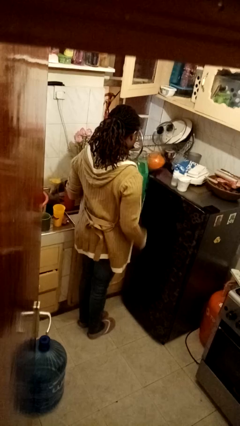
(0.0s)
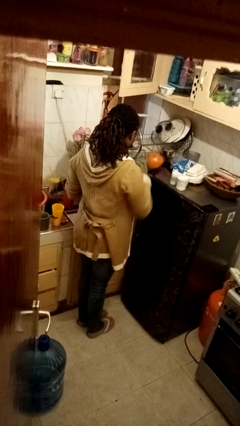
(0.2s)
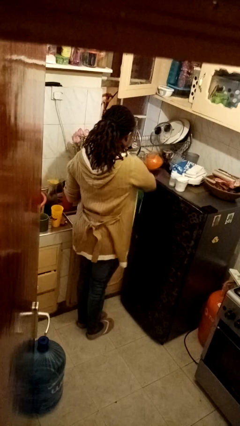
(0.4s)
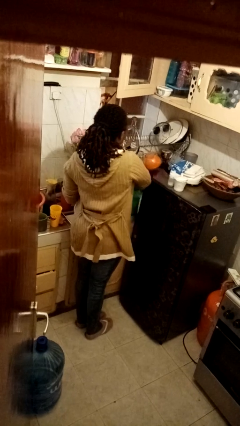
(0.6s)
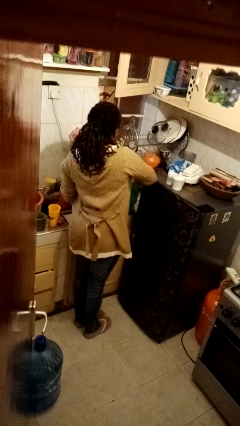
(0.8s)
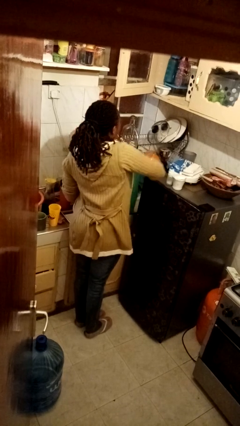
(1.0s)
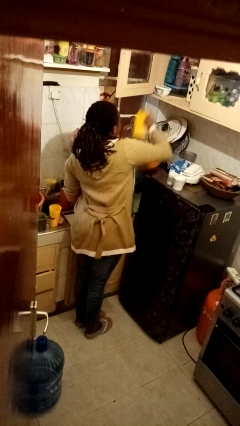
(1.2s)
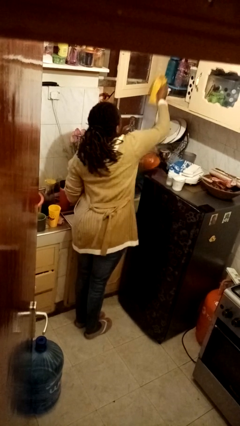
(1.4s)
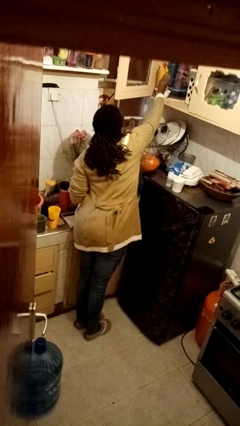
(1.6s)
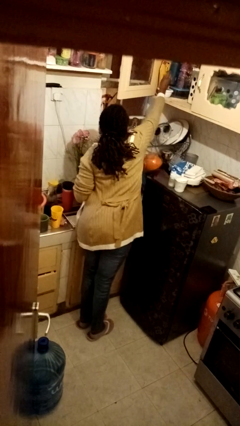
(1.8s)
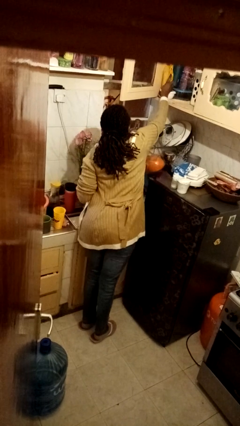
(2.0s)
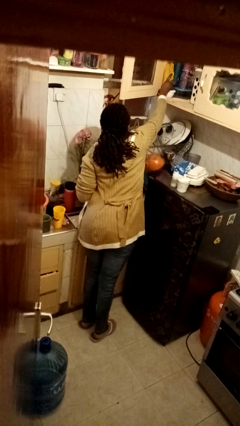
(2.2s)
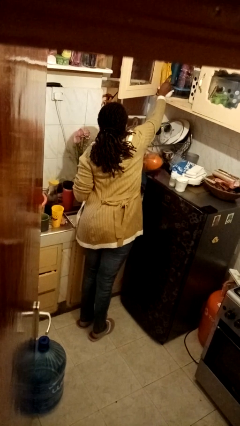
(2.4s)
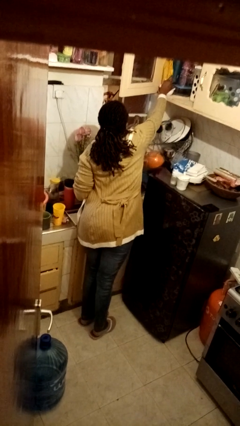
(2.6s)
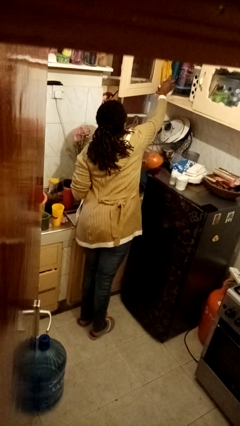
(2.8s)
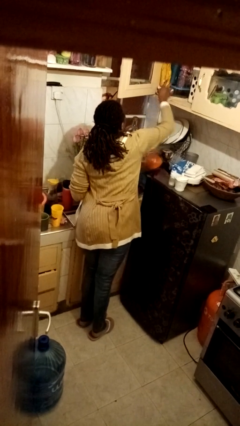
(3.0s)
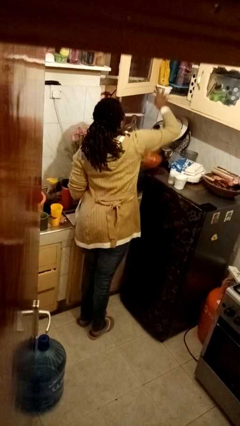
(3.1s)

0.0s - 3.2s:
person loads groceries into cabinet

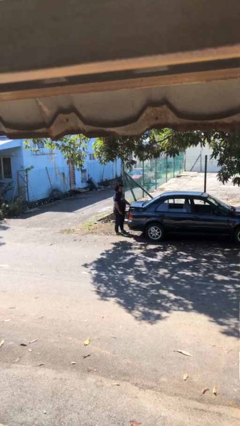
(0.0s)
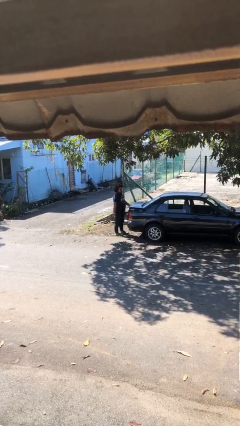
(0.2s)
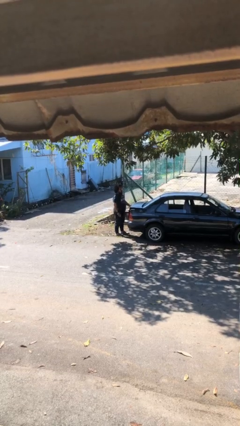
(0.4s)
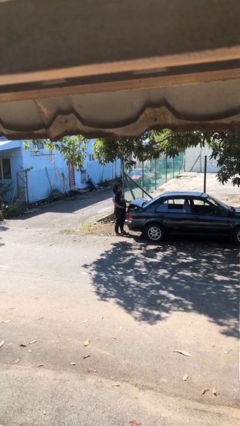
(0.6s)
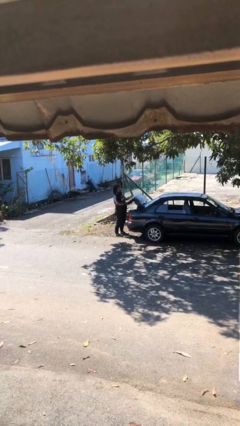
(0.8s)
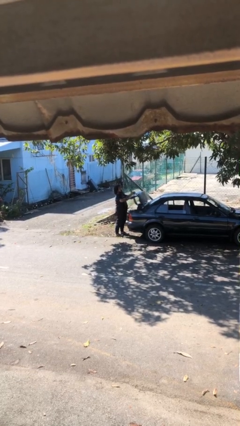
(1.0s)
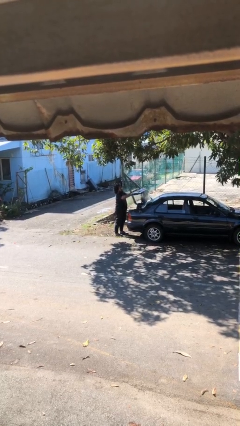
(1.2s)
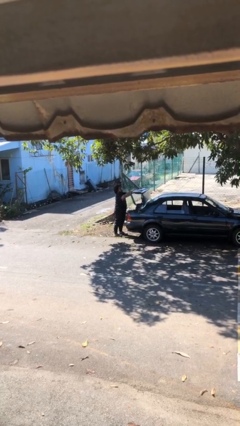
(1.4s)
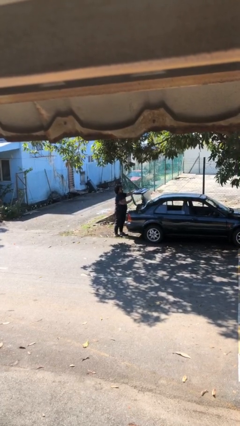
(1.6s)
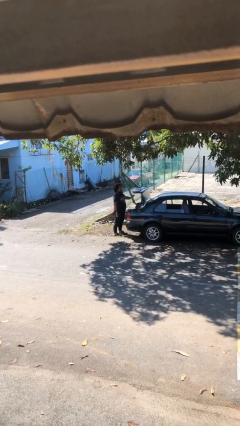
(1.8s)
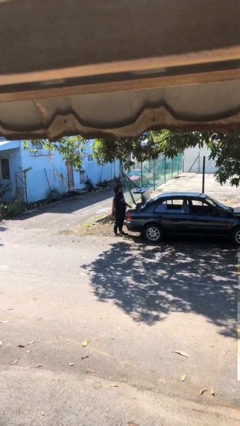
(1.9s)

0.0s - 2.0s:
person opens car trunk

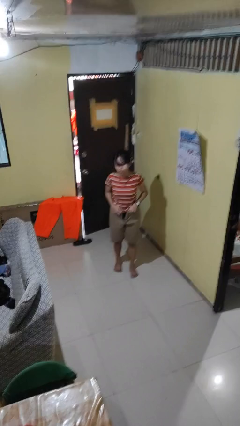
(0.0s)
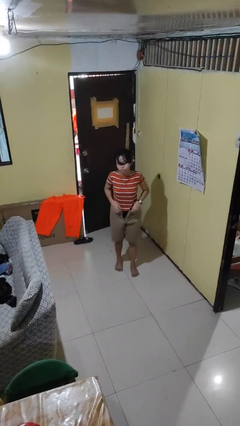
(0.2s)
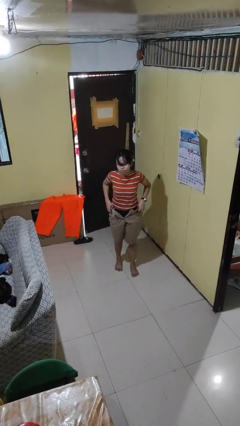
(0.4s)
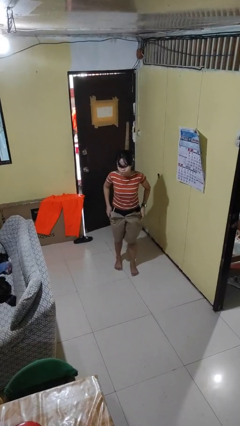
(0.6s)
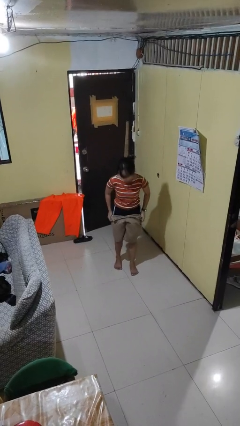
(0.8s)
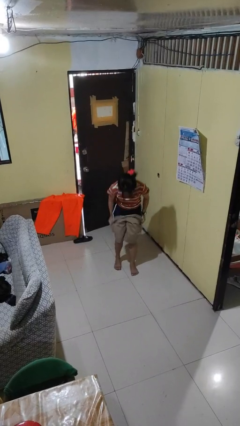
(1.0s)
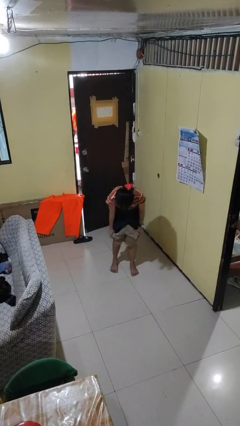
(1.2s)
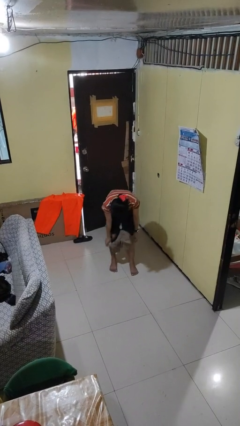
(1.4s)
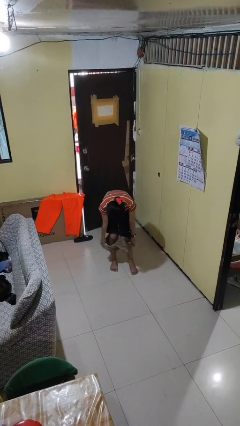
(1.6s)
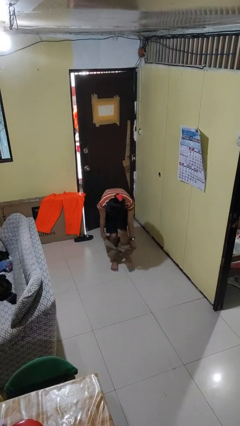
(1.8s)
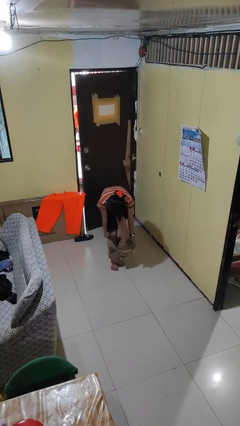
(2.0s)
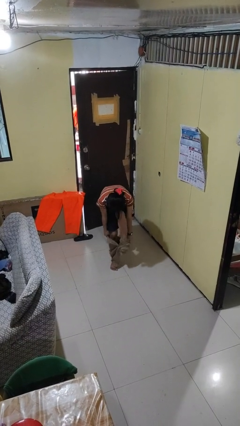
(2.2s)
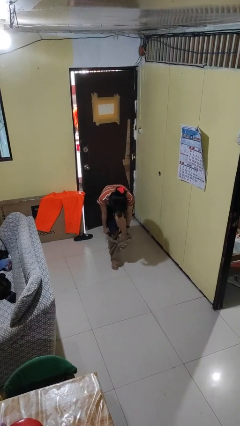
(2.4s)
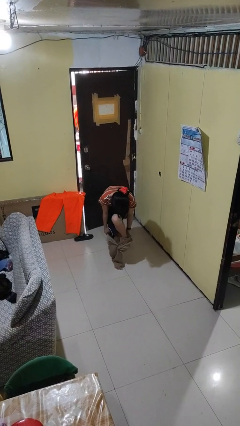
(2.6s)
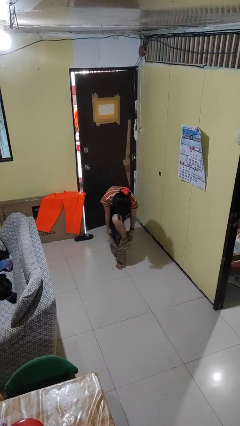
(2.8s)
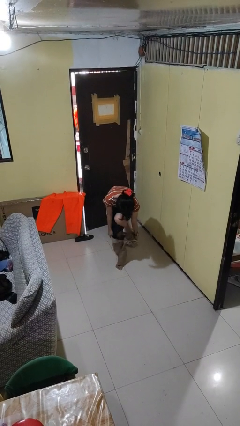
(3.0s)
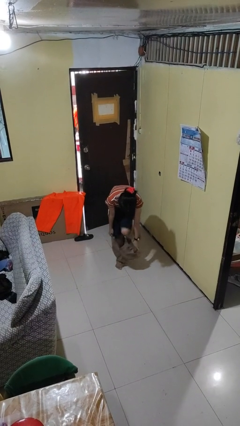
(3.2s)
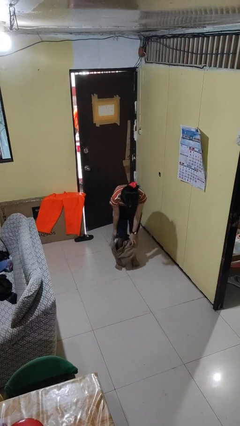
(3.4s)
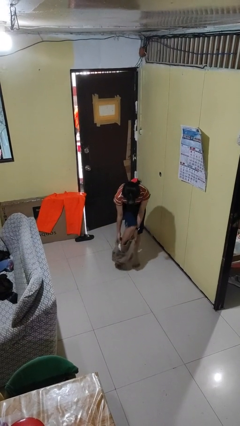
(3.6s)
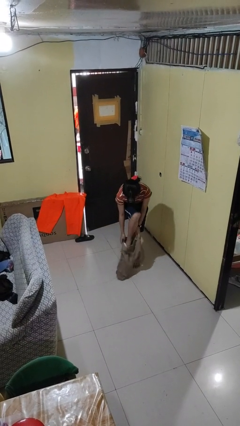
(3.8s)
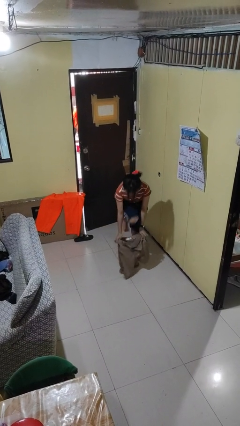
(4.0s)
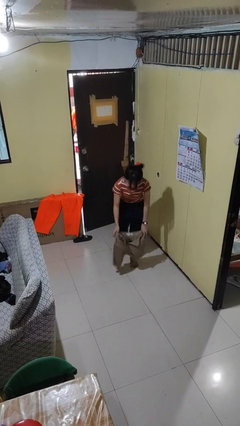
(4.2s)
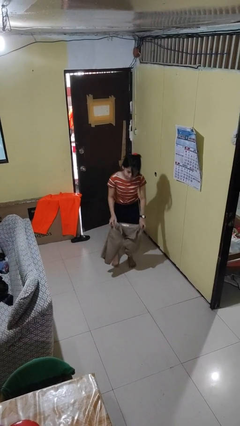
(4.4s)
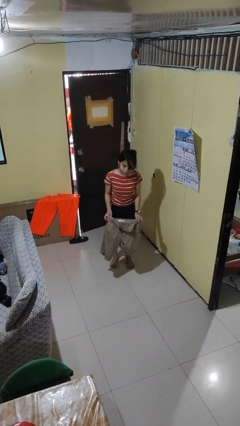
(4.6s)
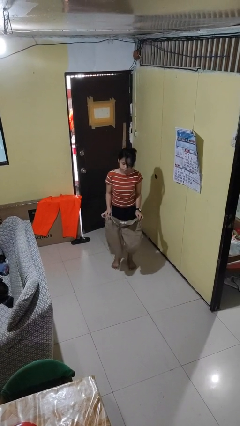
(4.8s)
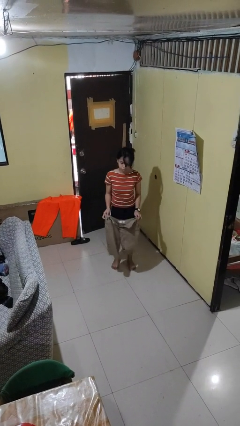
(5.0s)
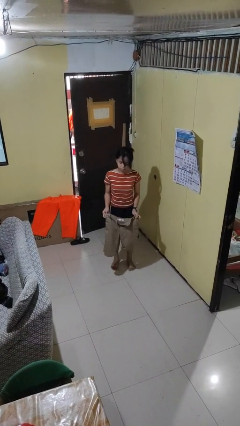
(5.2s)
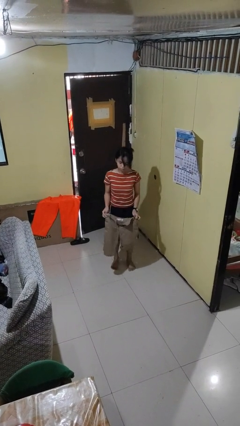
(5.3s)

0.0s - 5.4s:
person takes off pants

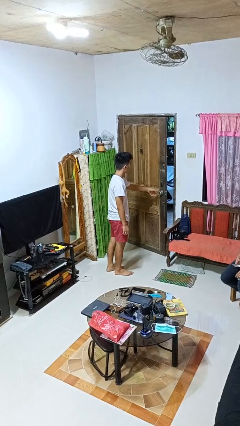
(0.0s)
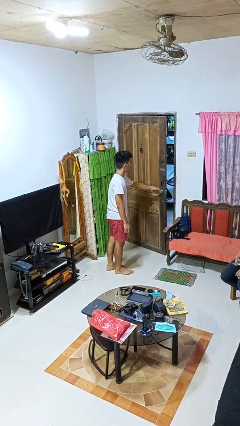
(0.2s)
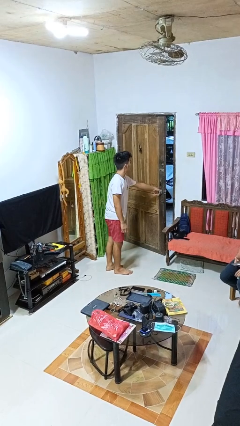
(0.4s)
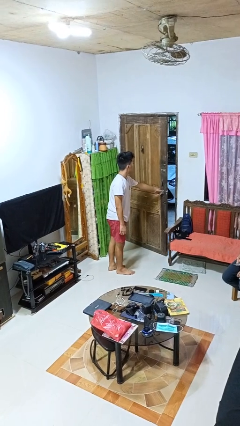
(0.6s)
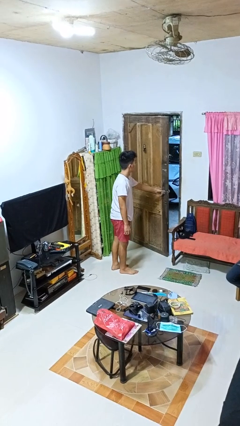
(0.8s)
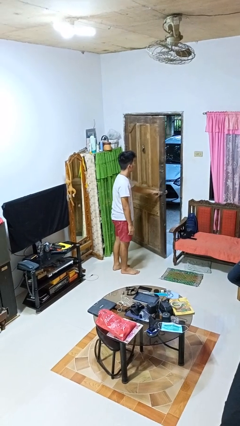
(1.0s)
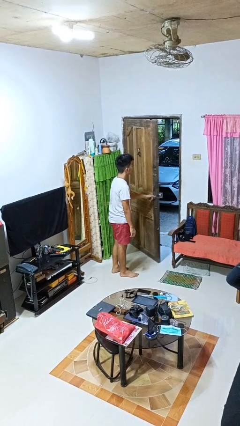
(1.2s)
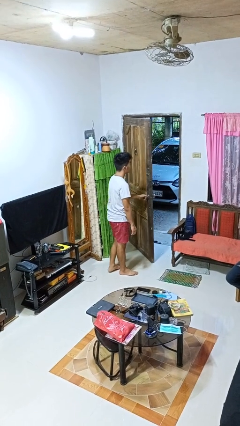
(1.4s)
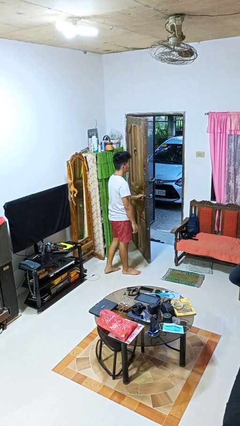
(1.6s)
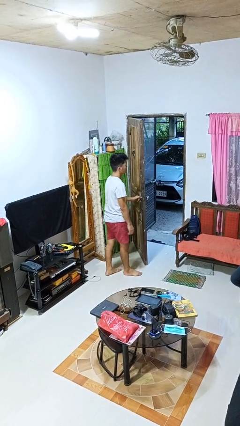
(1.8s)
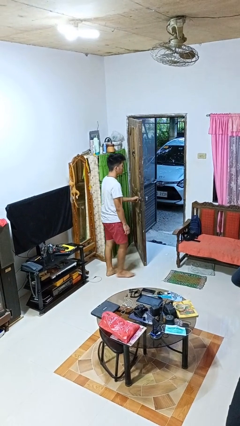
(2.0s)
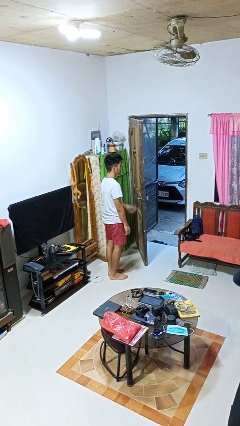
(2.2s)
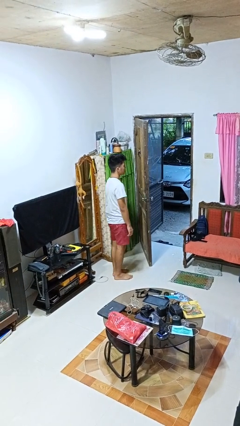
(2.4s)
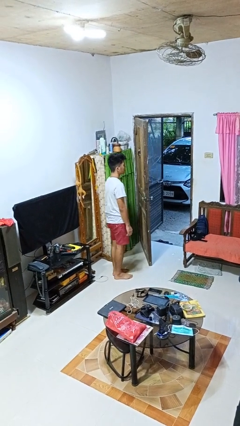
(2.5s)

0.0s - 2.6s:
person opens facility door

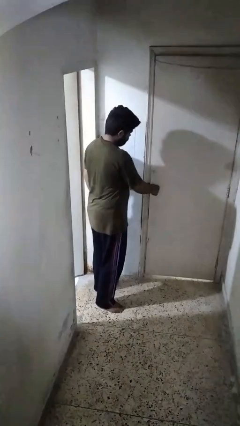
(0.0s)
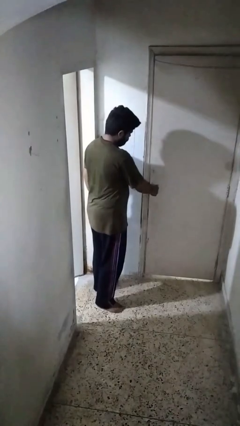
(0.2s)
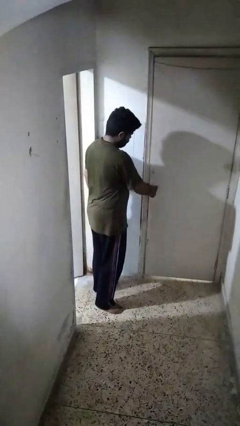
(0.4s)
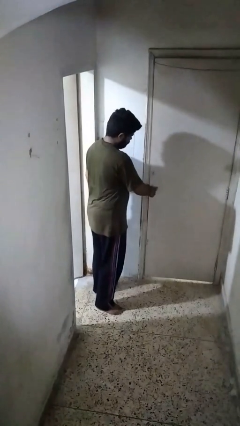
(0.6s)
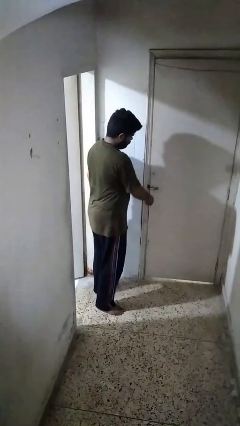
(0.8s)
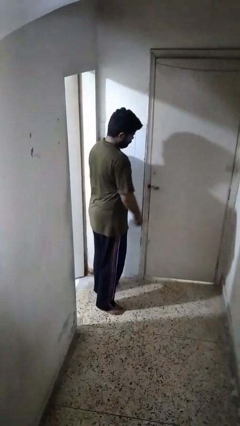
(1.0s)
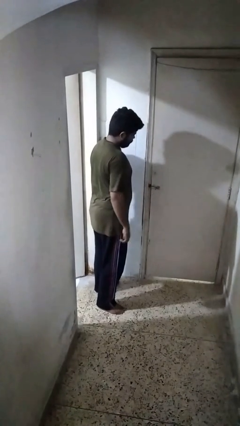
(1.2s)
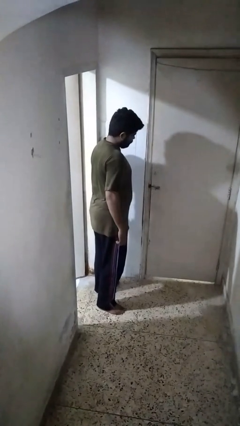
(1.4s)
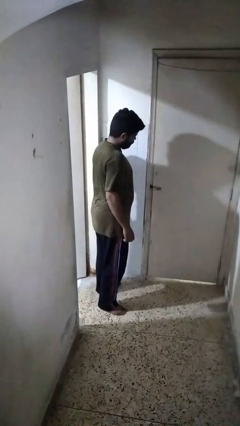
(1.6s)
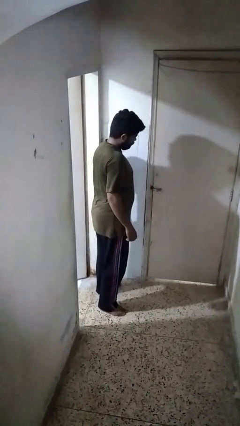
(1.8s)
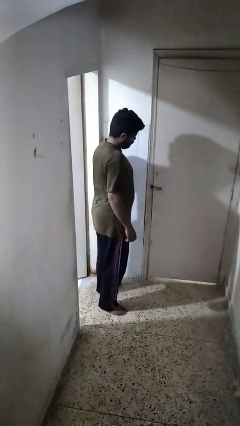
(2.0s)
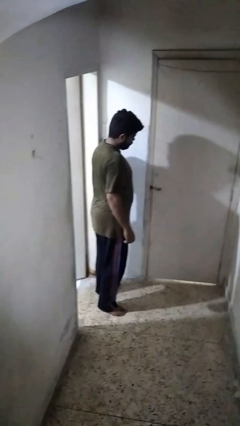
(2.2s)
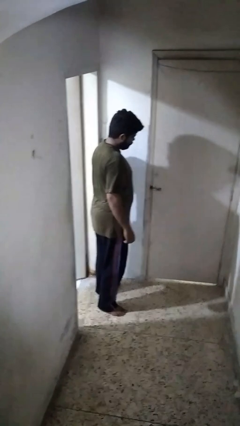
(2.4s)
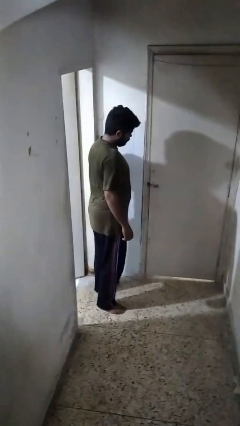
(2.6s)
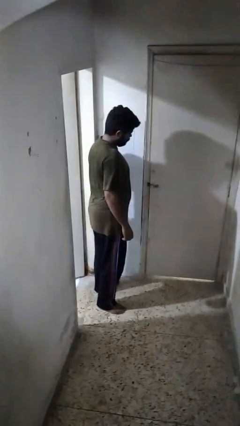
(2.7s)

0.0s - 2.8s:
person locks door with keys

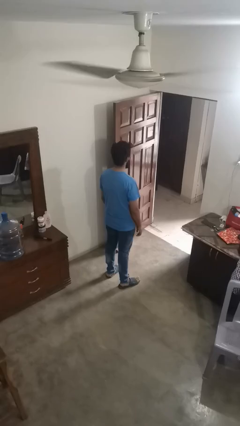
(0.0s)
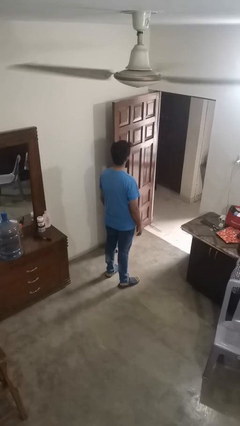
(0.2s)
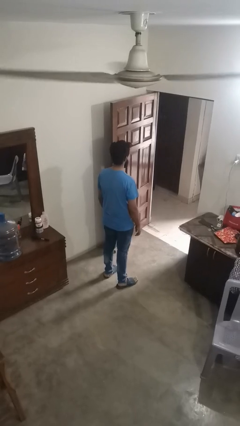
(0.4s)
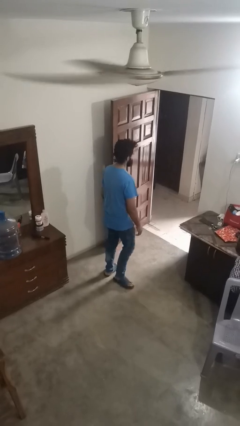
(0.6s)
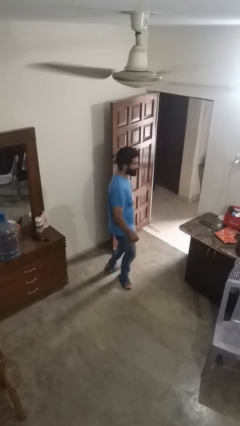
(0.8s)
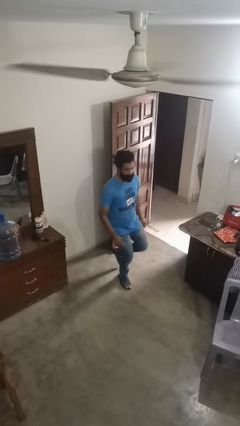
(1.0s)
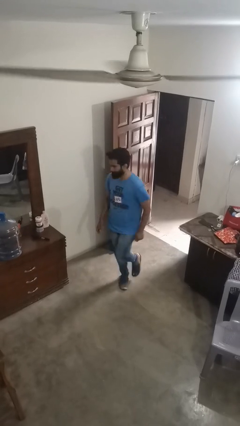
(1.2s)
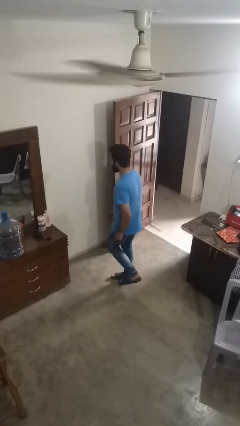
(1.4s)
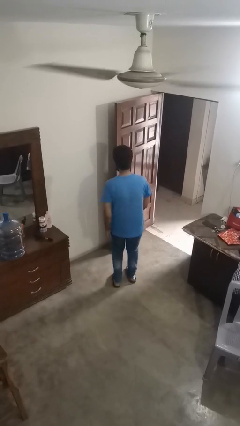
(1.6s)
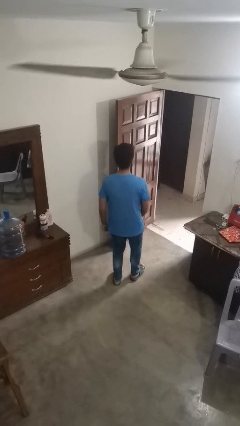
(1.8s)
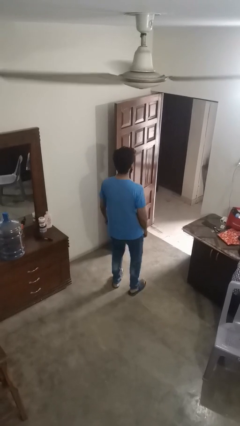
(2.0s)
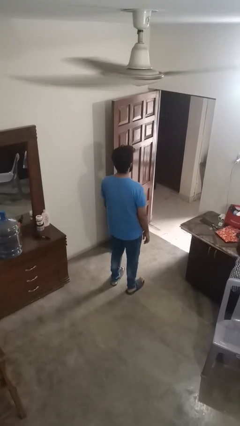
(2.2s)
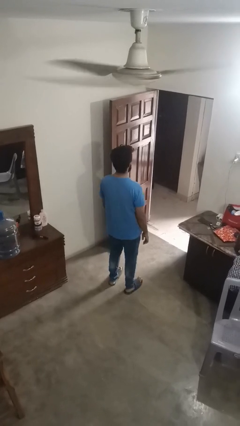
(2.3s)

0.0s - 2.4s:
person twirls
